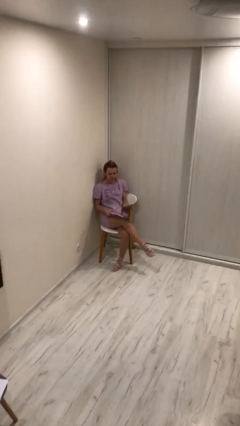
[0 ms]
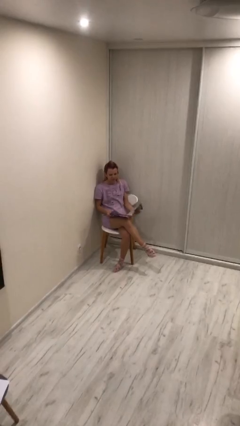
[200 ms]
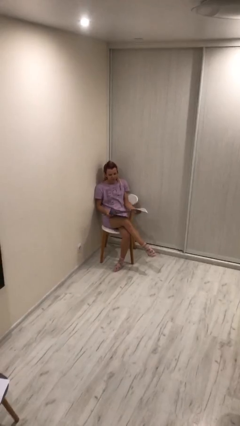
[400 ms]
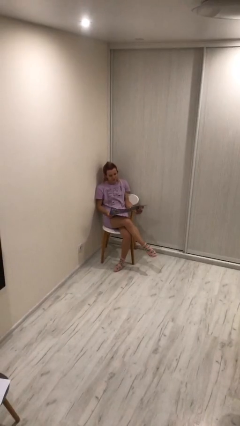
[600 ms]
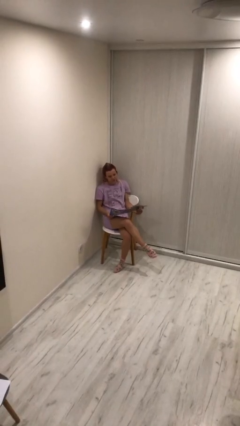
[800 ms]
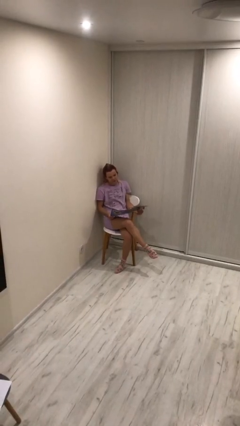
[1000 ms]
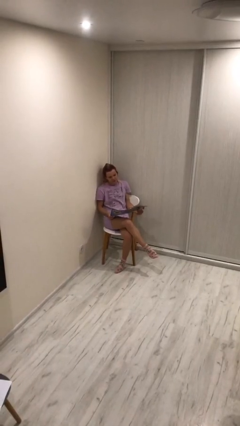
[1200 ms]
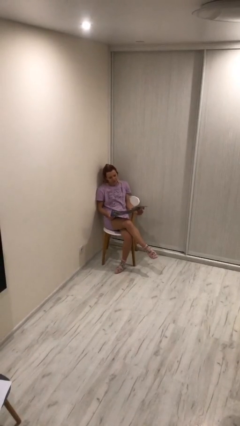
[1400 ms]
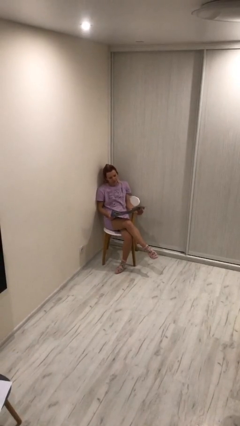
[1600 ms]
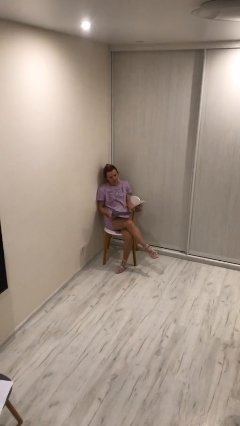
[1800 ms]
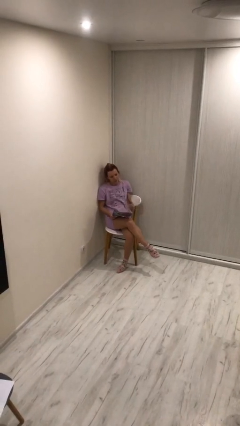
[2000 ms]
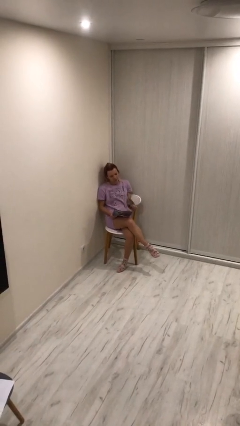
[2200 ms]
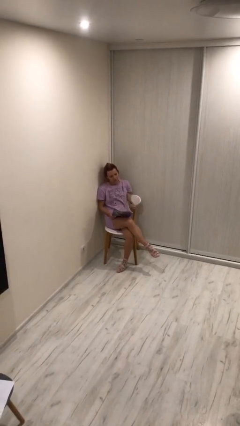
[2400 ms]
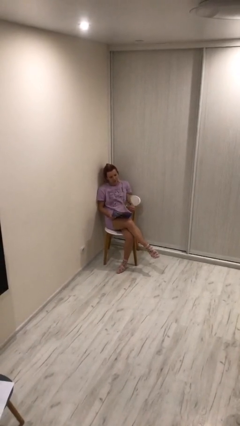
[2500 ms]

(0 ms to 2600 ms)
person reads magazine

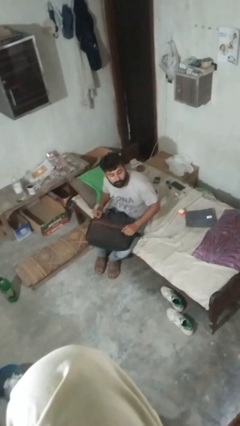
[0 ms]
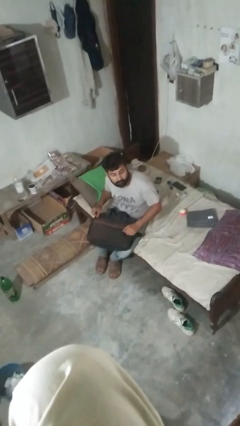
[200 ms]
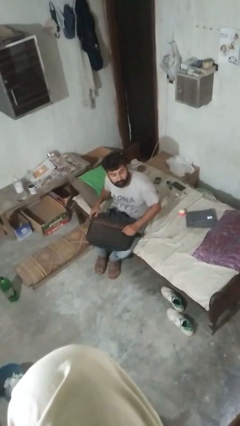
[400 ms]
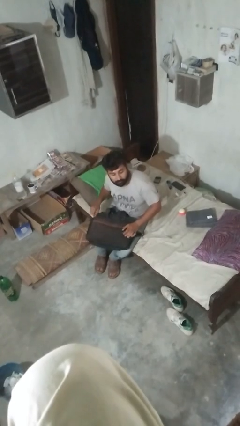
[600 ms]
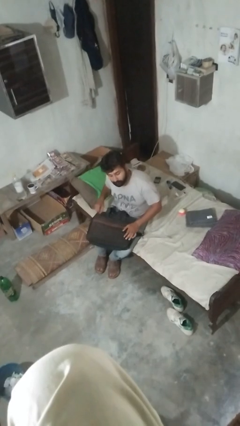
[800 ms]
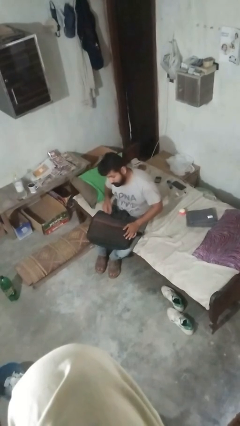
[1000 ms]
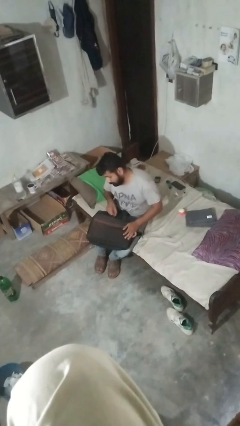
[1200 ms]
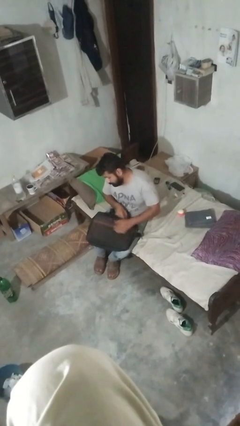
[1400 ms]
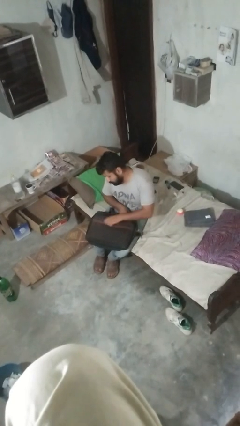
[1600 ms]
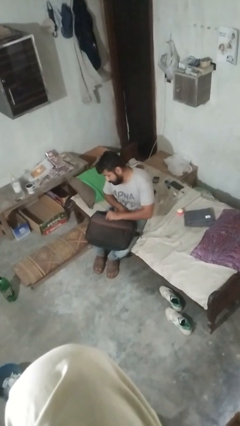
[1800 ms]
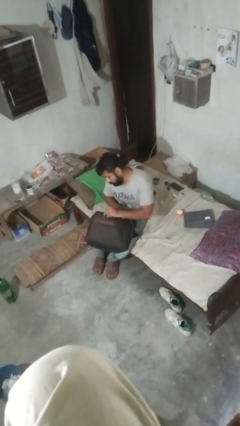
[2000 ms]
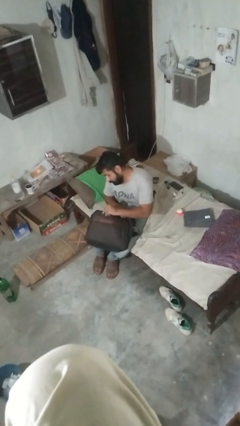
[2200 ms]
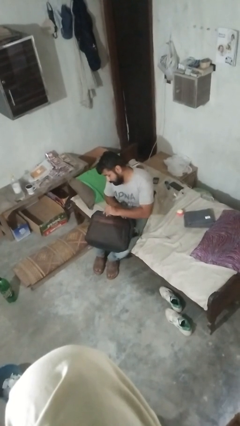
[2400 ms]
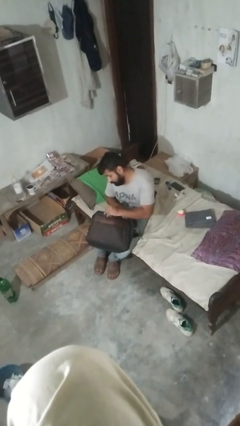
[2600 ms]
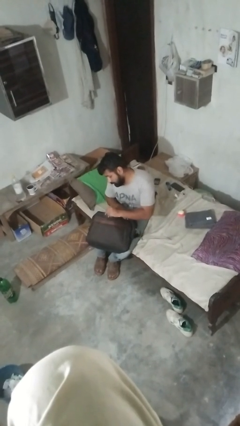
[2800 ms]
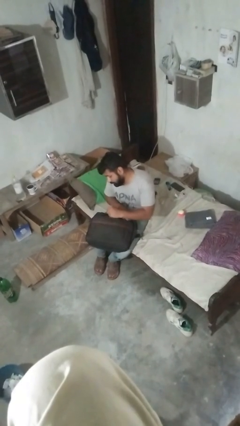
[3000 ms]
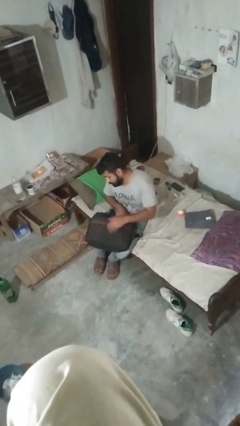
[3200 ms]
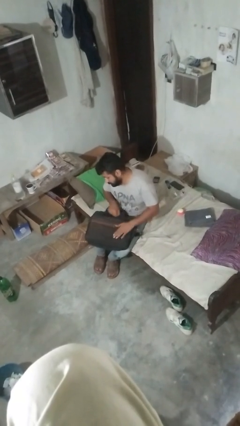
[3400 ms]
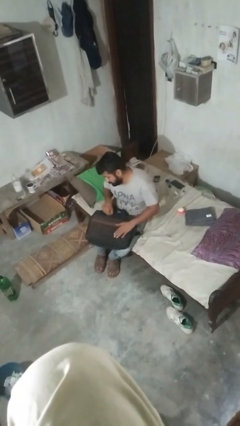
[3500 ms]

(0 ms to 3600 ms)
person searches in bag

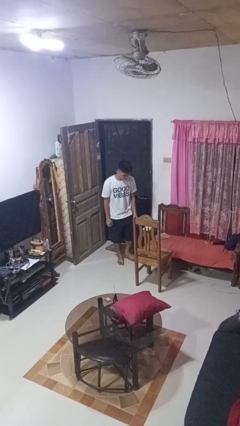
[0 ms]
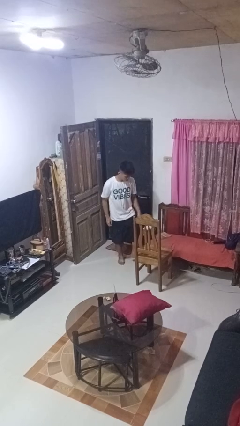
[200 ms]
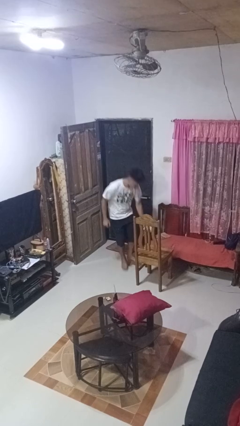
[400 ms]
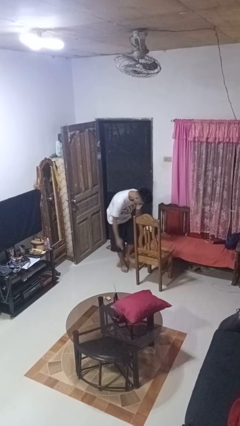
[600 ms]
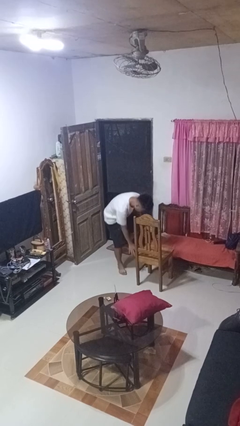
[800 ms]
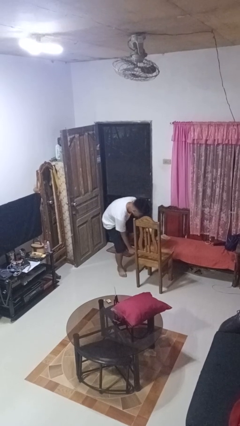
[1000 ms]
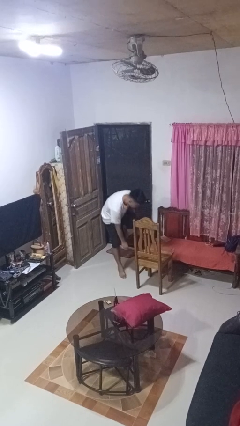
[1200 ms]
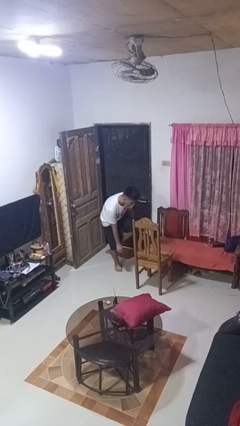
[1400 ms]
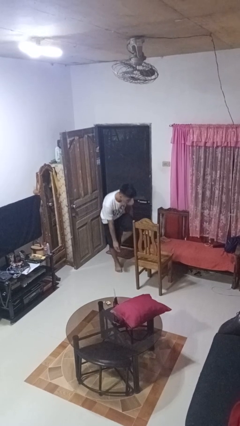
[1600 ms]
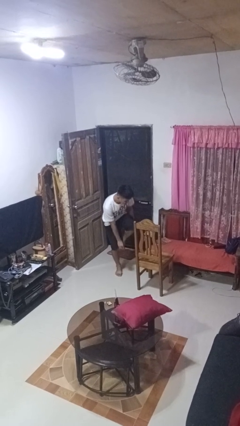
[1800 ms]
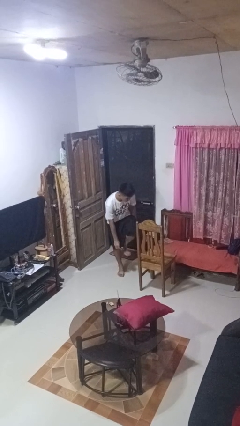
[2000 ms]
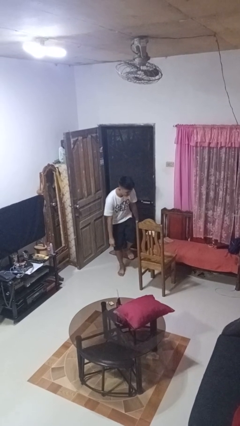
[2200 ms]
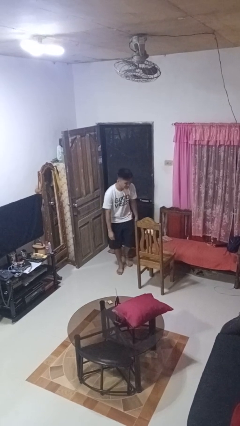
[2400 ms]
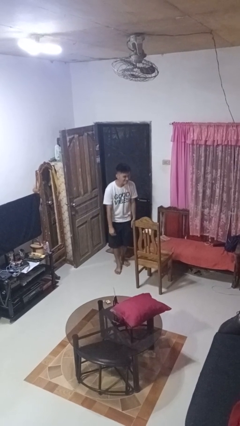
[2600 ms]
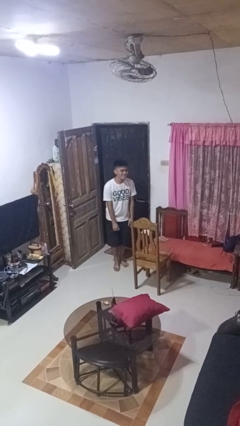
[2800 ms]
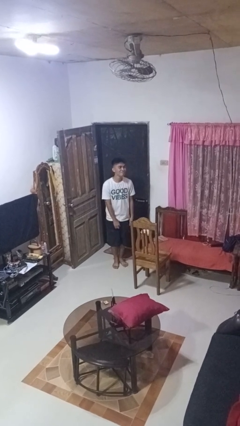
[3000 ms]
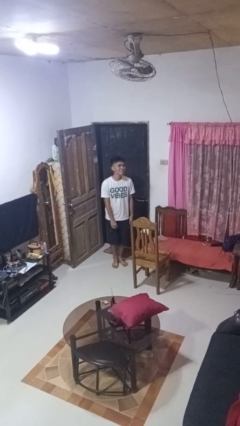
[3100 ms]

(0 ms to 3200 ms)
person stubs toe

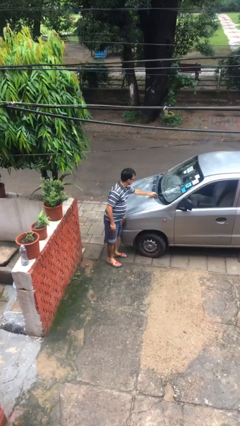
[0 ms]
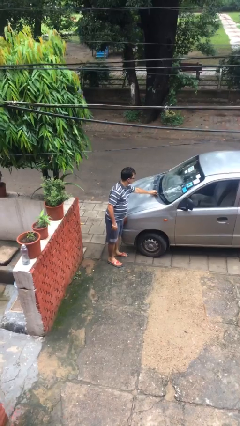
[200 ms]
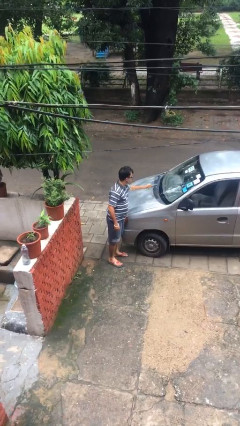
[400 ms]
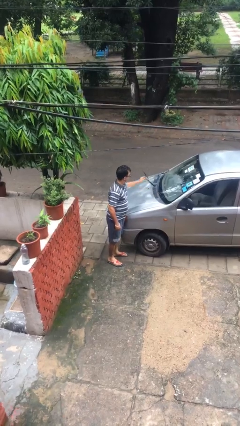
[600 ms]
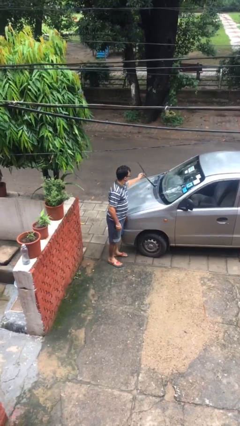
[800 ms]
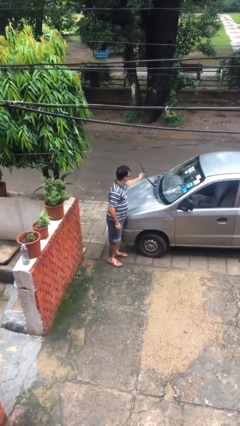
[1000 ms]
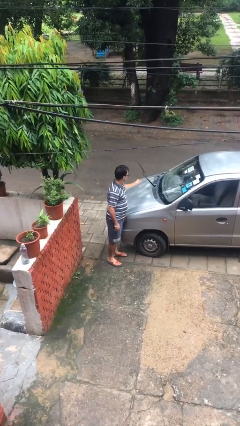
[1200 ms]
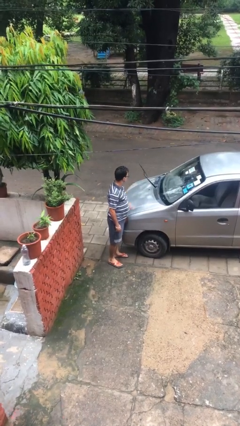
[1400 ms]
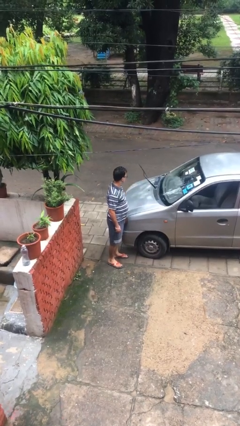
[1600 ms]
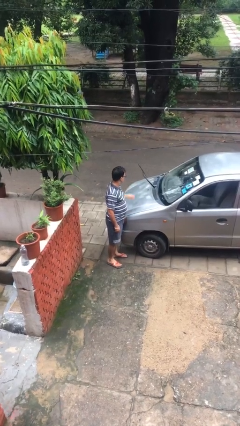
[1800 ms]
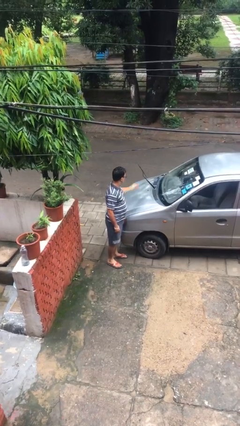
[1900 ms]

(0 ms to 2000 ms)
person flips up car wipers

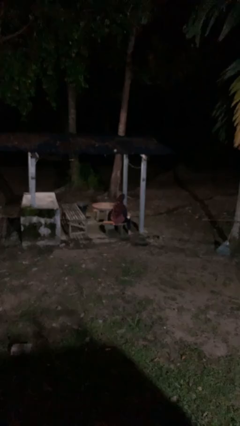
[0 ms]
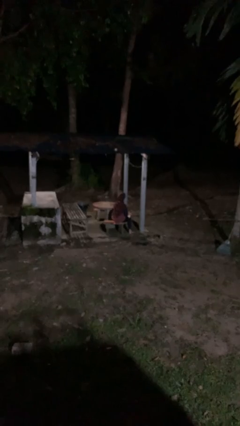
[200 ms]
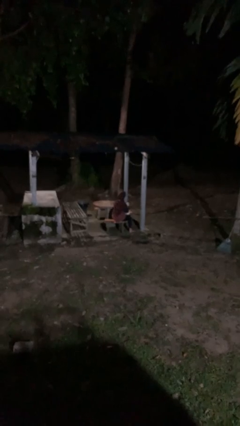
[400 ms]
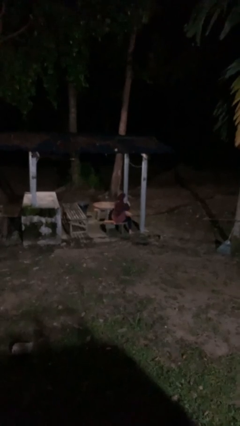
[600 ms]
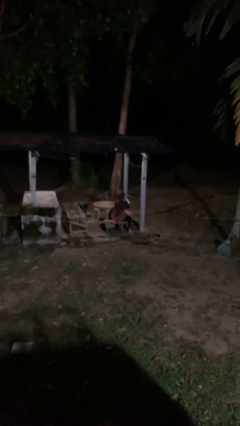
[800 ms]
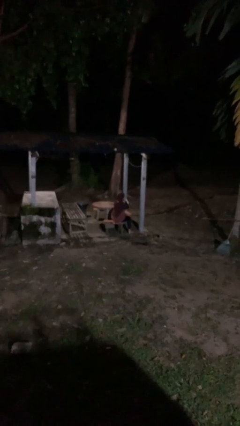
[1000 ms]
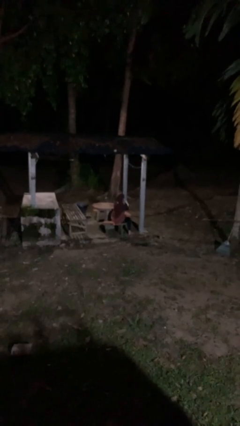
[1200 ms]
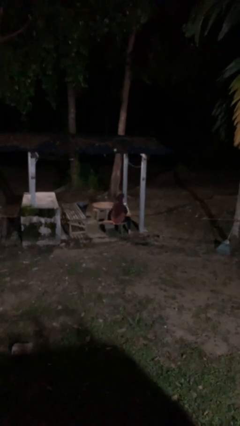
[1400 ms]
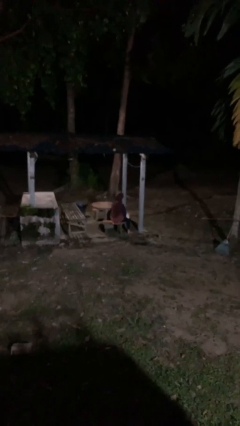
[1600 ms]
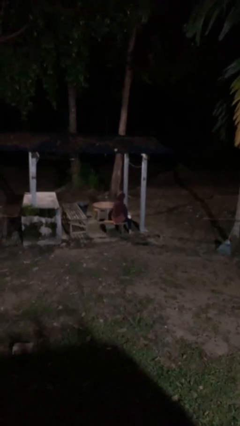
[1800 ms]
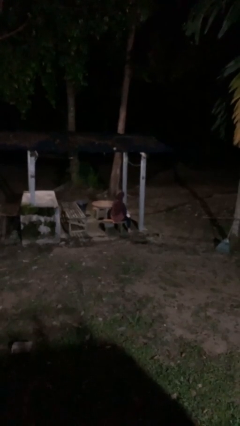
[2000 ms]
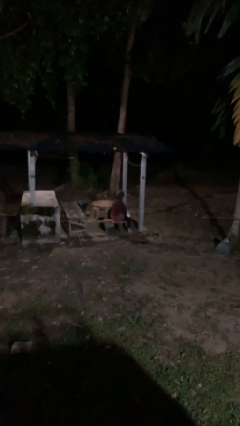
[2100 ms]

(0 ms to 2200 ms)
person blows nose

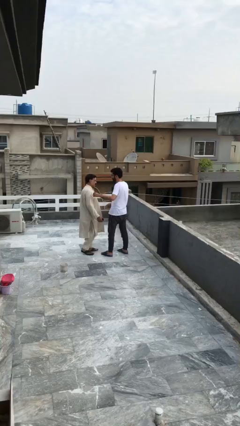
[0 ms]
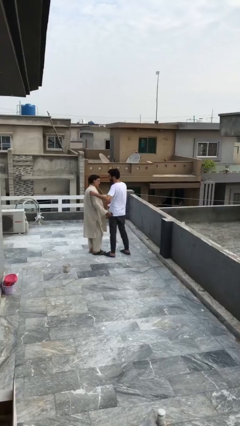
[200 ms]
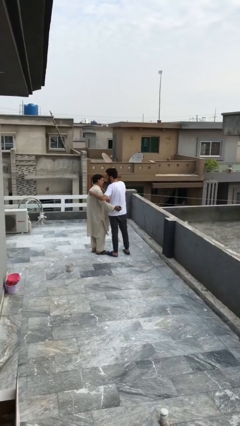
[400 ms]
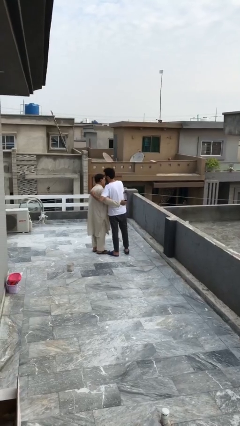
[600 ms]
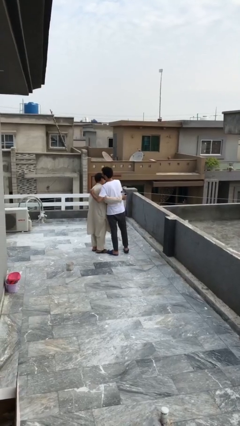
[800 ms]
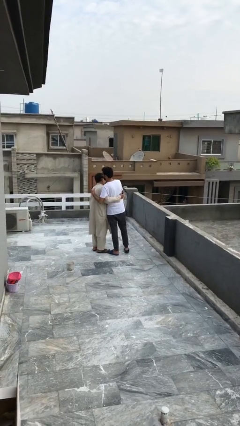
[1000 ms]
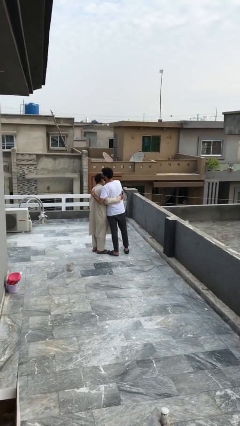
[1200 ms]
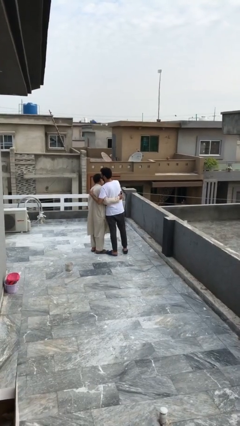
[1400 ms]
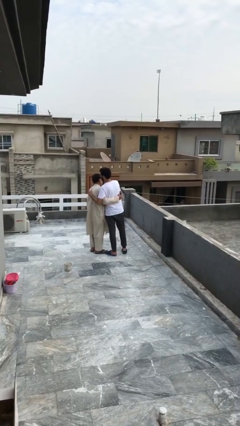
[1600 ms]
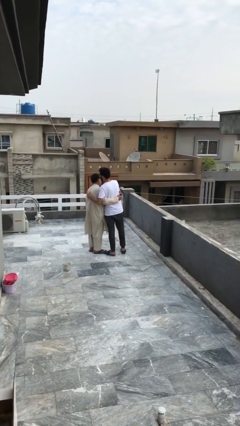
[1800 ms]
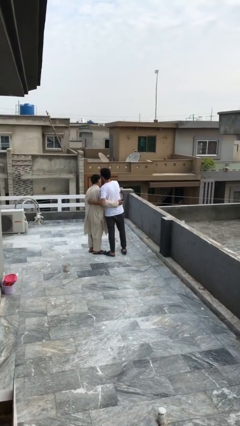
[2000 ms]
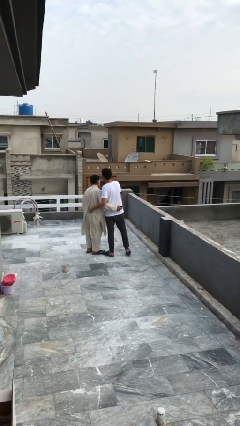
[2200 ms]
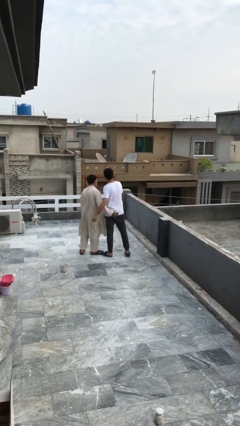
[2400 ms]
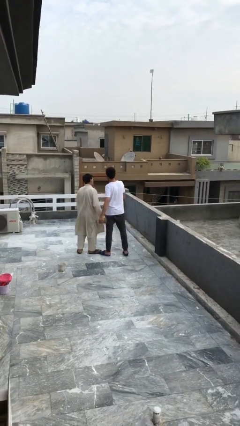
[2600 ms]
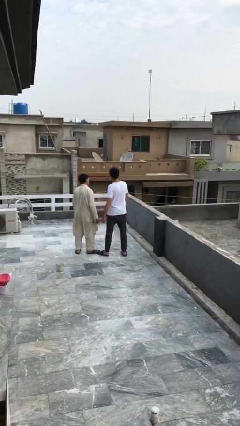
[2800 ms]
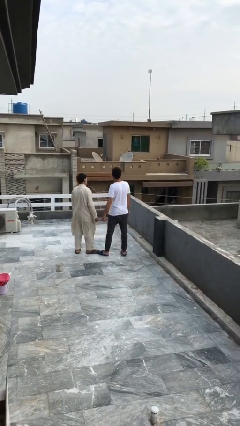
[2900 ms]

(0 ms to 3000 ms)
person embraces person

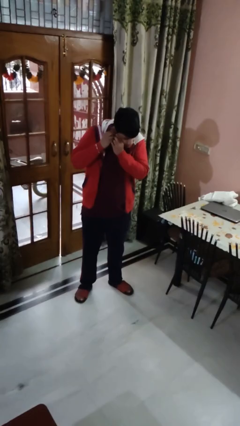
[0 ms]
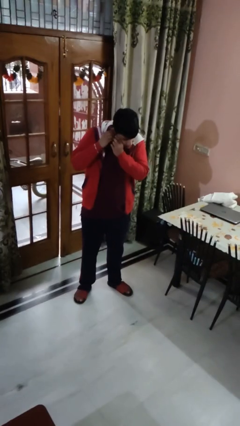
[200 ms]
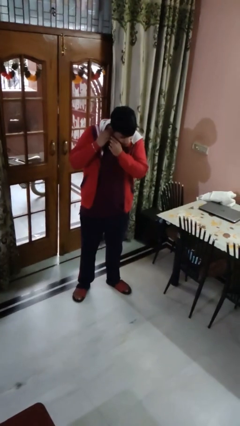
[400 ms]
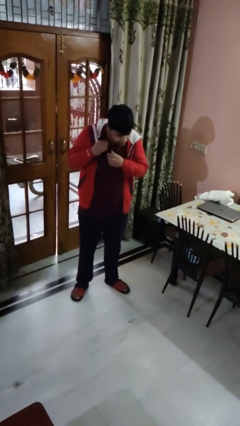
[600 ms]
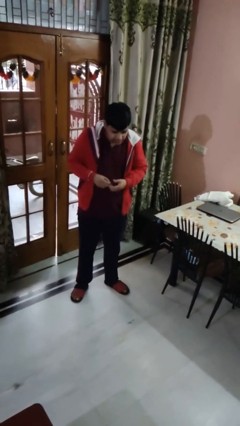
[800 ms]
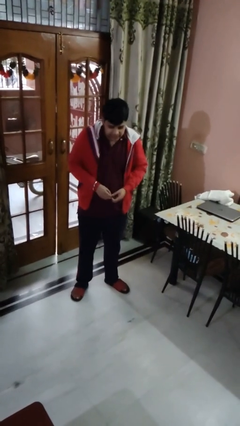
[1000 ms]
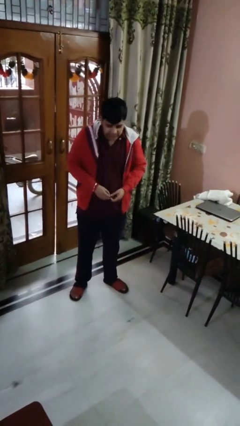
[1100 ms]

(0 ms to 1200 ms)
person takes off earrings
